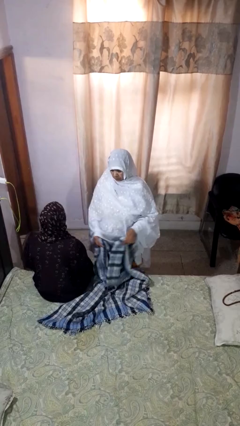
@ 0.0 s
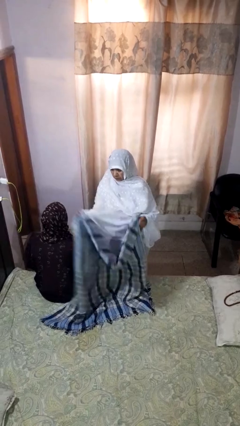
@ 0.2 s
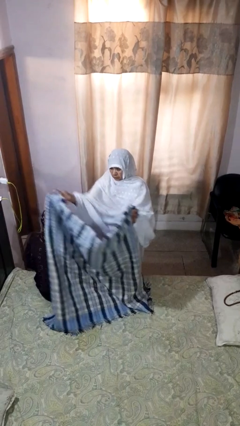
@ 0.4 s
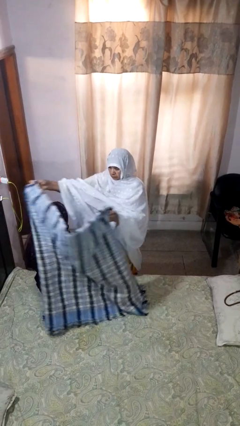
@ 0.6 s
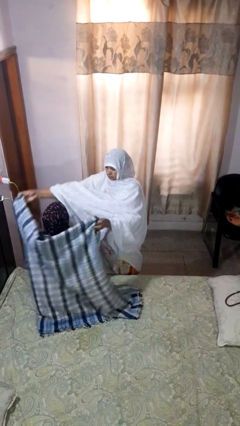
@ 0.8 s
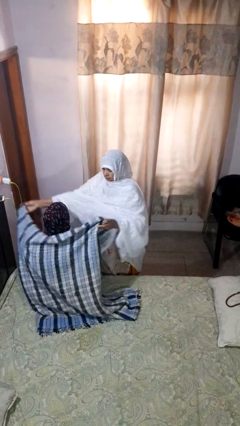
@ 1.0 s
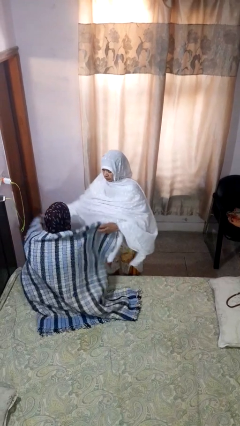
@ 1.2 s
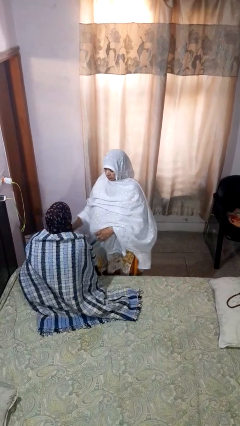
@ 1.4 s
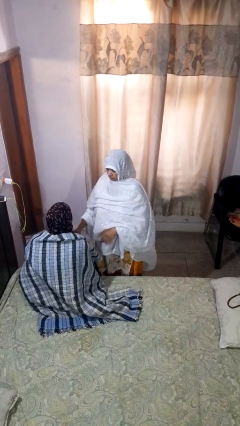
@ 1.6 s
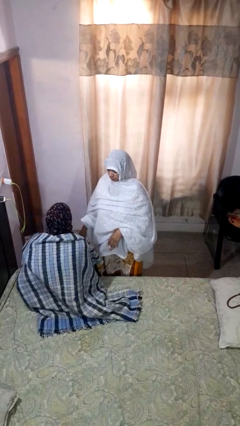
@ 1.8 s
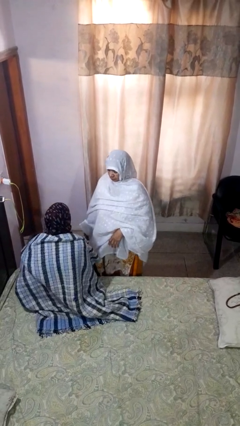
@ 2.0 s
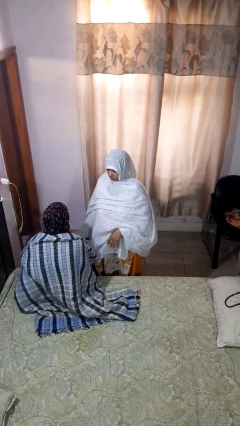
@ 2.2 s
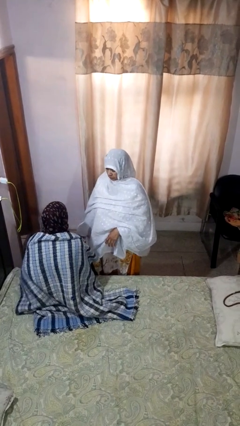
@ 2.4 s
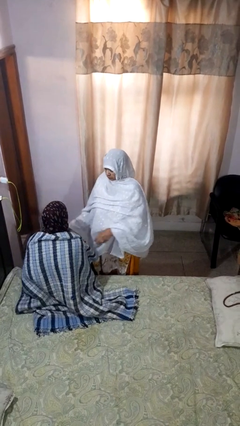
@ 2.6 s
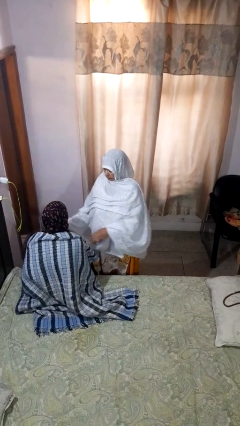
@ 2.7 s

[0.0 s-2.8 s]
person covers friend with blanket

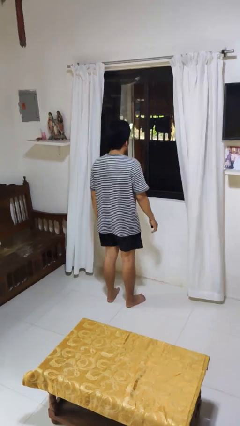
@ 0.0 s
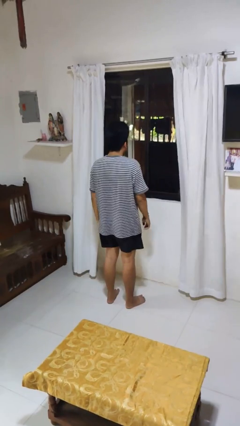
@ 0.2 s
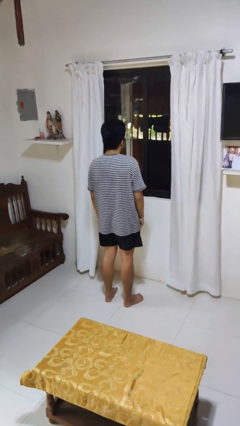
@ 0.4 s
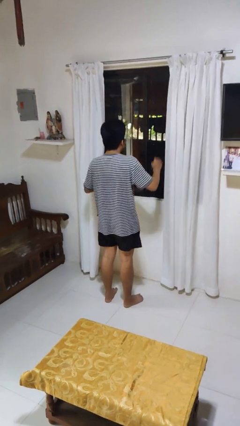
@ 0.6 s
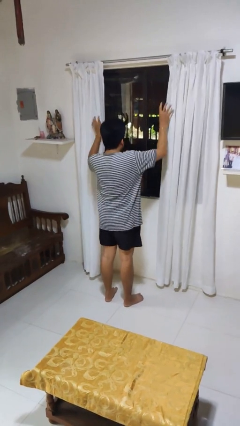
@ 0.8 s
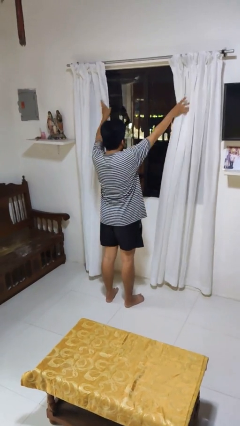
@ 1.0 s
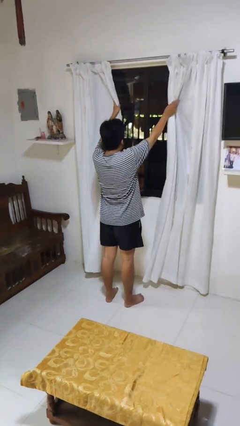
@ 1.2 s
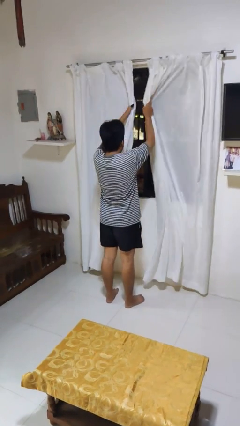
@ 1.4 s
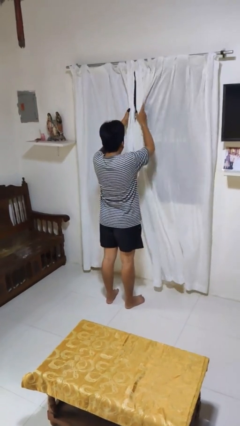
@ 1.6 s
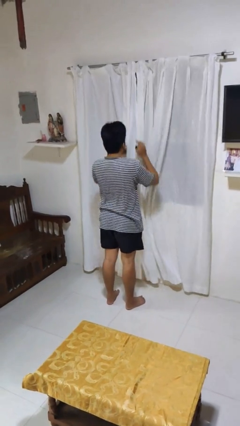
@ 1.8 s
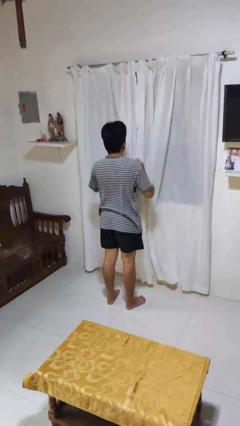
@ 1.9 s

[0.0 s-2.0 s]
person closes curtains

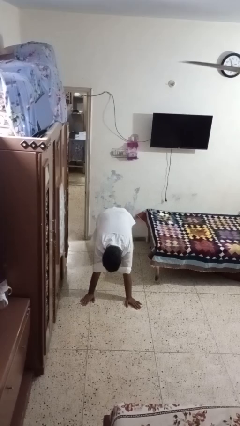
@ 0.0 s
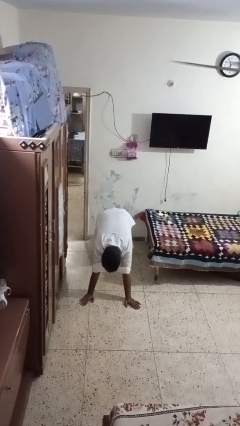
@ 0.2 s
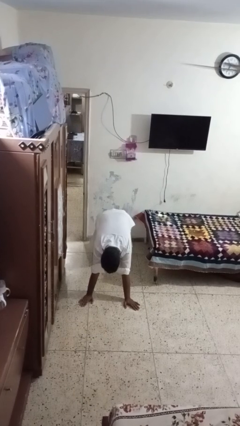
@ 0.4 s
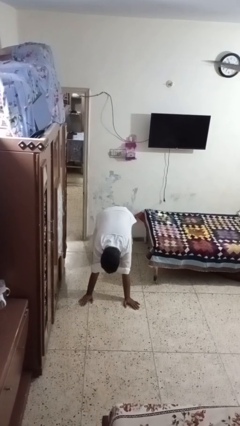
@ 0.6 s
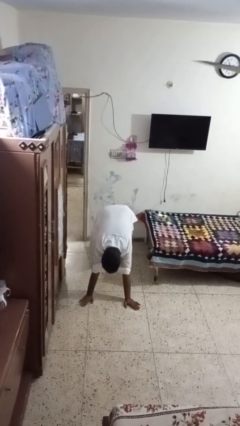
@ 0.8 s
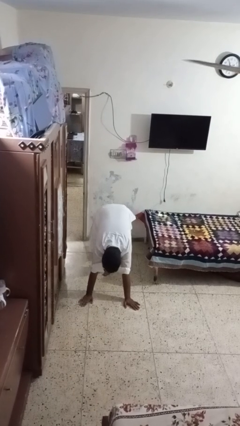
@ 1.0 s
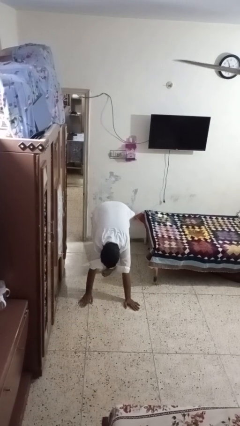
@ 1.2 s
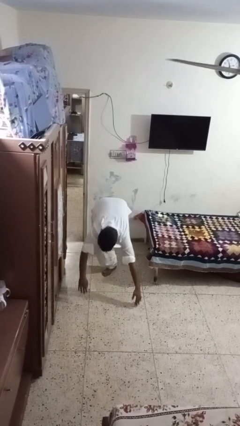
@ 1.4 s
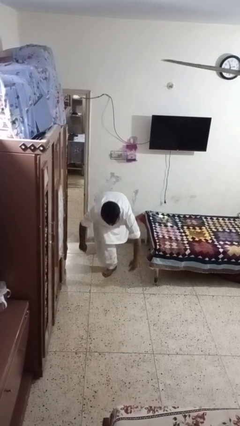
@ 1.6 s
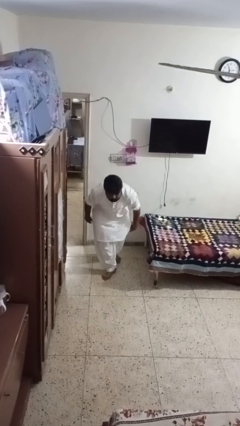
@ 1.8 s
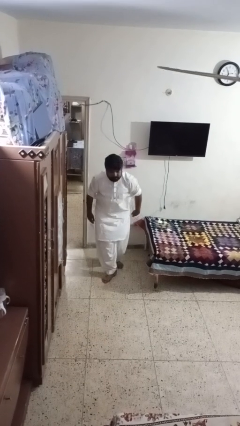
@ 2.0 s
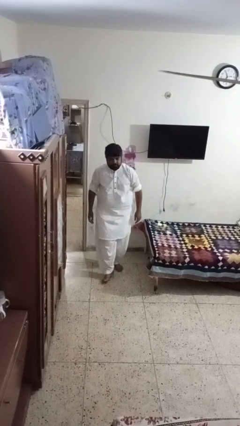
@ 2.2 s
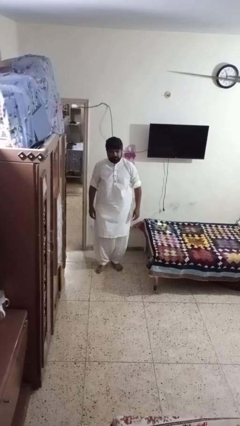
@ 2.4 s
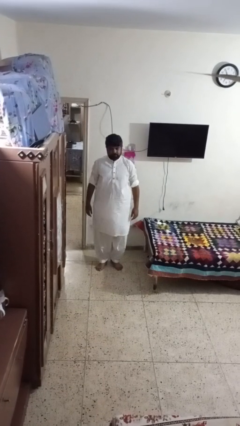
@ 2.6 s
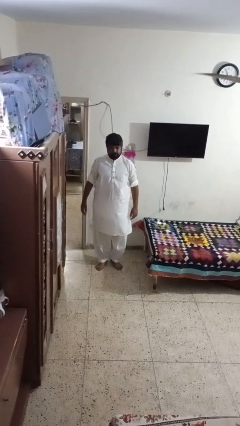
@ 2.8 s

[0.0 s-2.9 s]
person stands up from floor

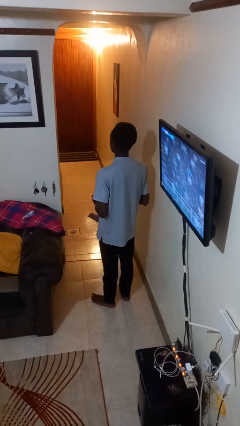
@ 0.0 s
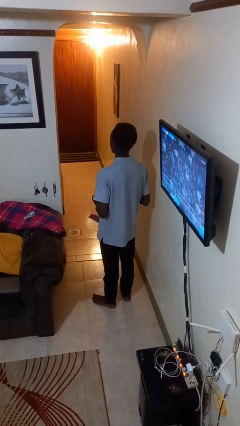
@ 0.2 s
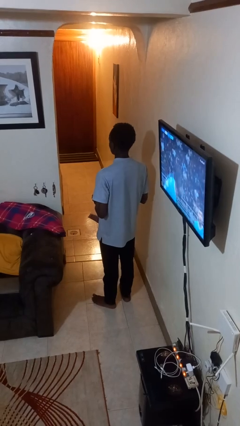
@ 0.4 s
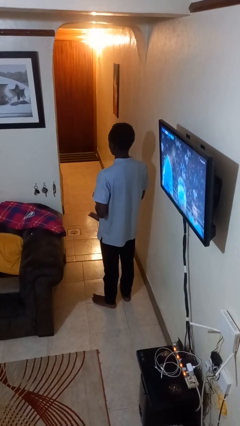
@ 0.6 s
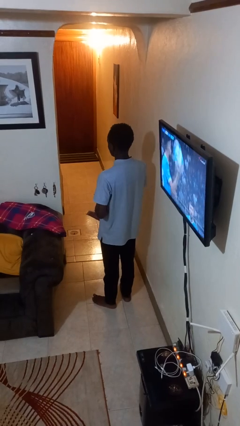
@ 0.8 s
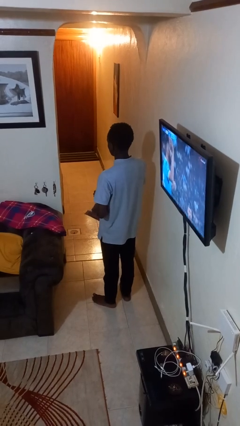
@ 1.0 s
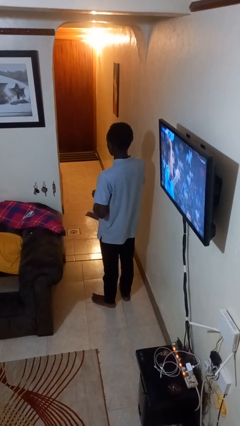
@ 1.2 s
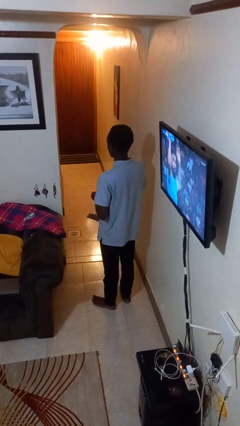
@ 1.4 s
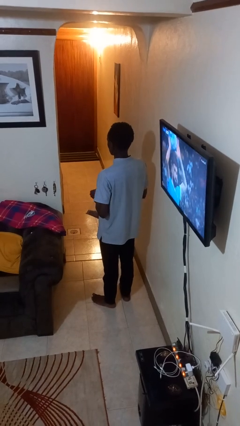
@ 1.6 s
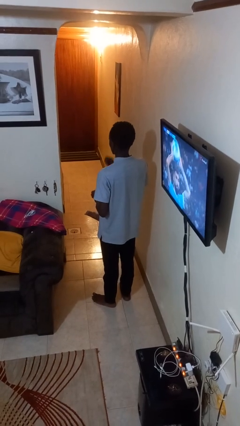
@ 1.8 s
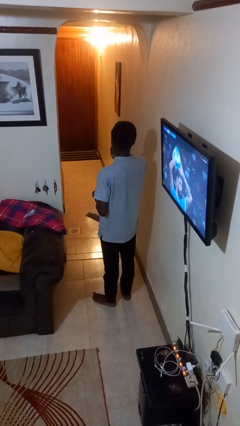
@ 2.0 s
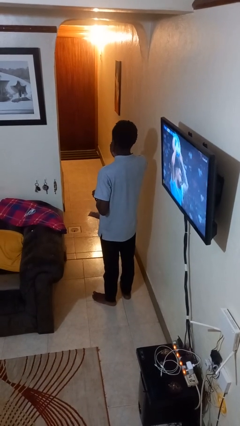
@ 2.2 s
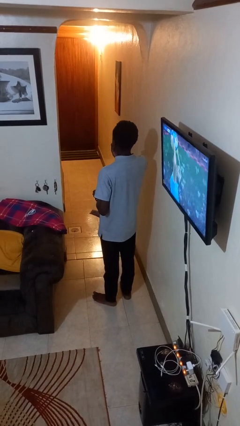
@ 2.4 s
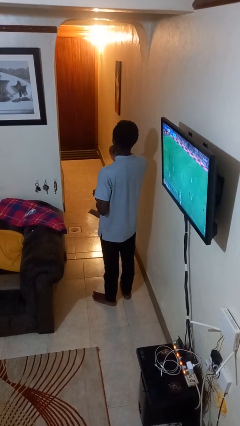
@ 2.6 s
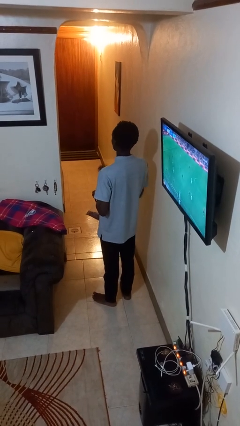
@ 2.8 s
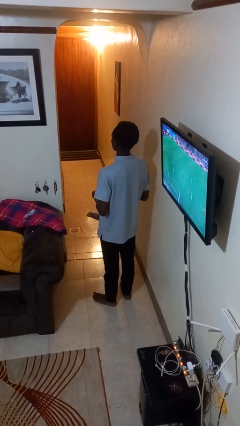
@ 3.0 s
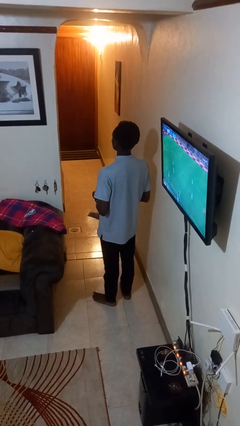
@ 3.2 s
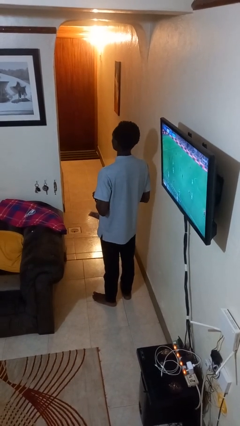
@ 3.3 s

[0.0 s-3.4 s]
person eats snack from bag

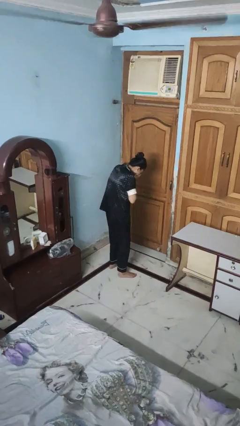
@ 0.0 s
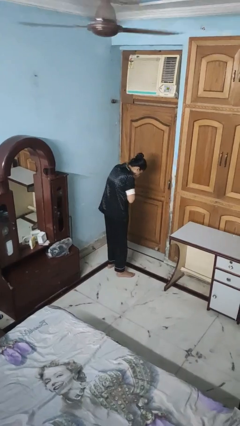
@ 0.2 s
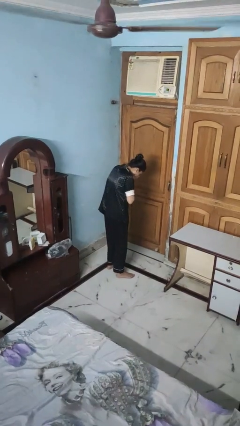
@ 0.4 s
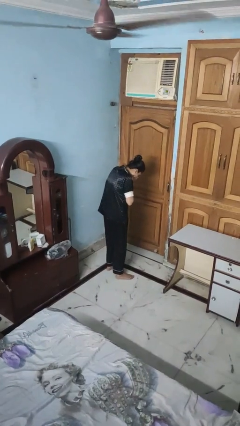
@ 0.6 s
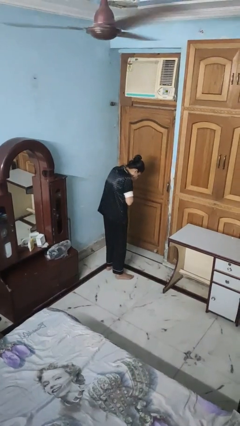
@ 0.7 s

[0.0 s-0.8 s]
person sneezes into hand

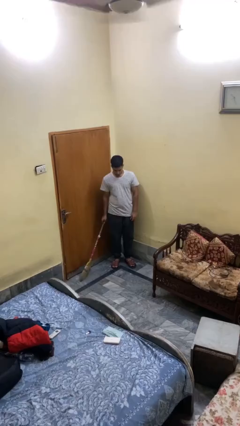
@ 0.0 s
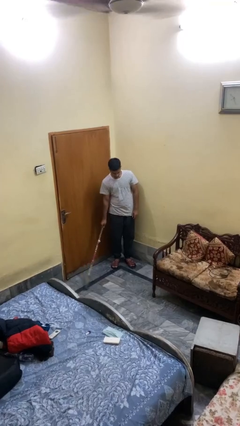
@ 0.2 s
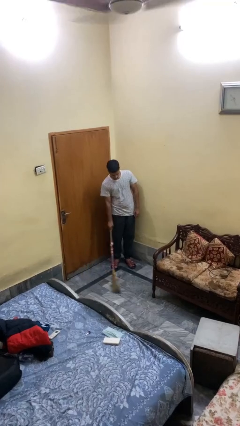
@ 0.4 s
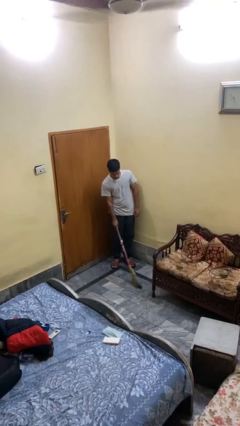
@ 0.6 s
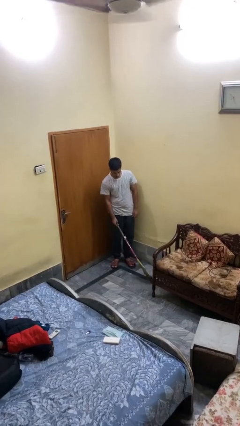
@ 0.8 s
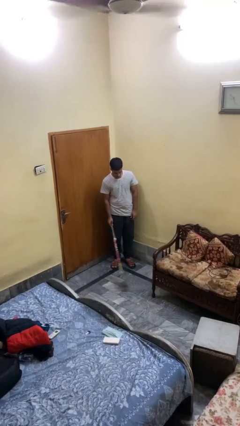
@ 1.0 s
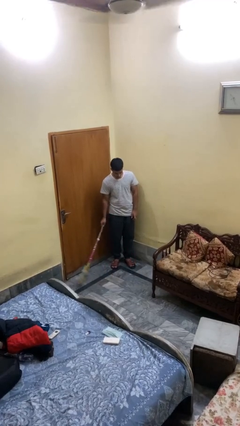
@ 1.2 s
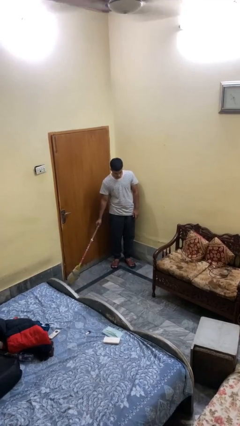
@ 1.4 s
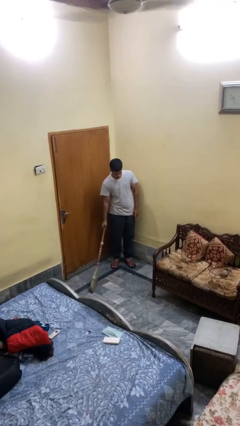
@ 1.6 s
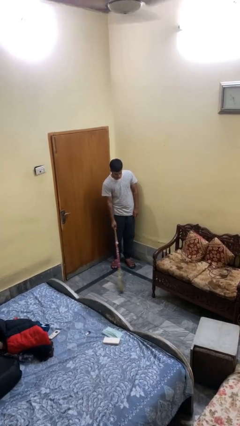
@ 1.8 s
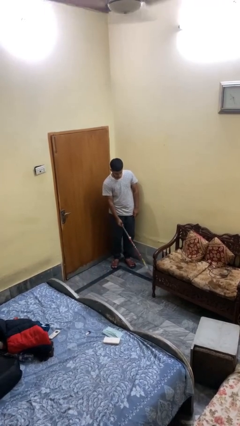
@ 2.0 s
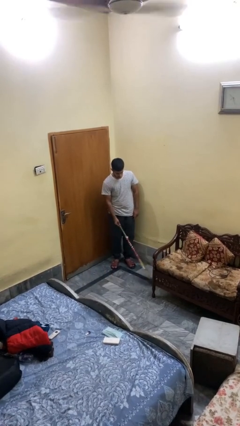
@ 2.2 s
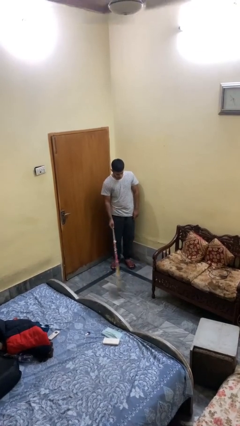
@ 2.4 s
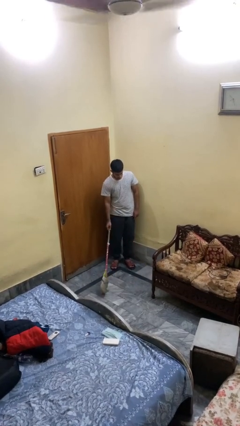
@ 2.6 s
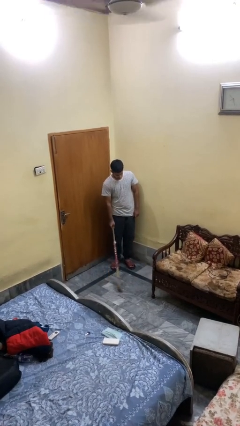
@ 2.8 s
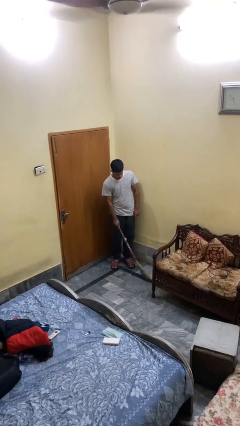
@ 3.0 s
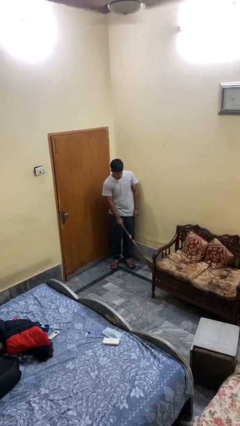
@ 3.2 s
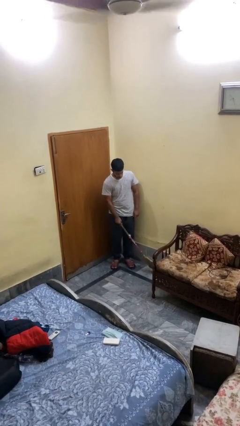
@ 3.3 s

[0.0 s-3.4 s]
person sweeps floor

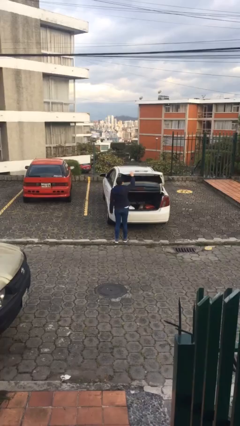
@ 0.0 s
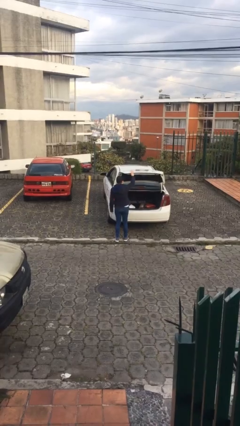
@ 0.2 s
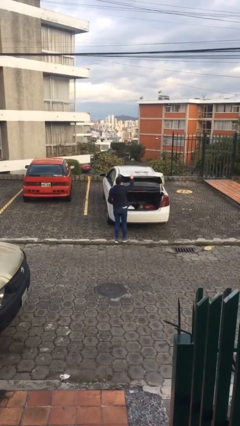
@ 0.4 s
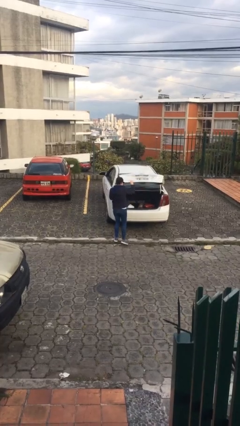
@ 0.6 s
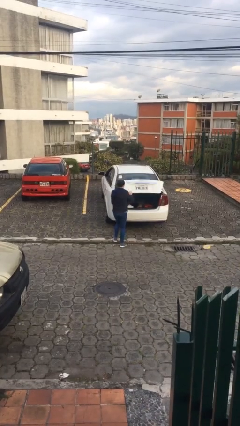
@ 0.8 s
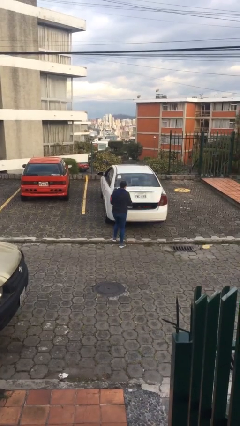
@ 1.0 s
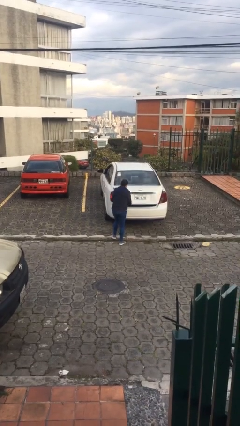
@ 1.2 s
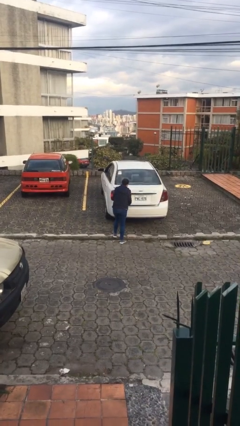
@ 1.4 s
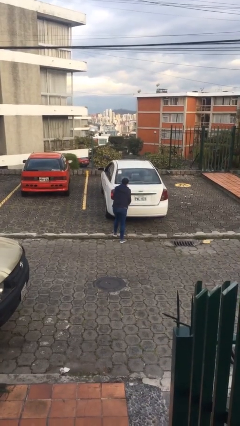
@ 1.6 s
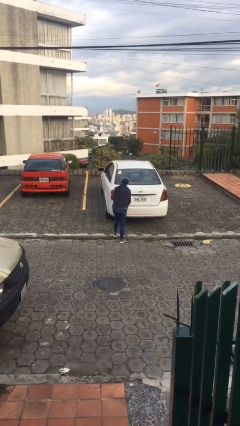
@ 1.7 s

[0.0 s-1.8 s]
person closes car trunk
